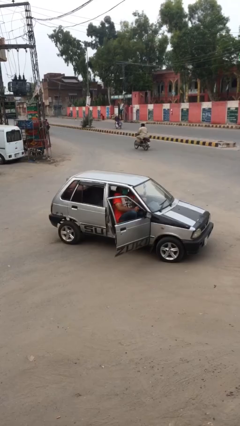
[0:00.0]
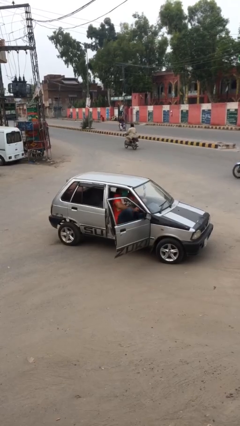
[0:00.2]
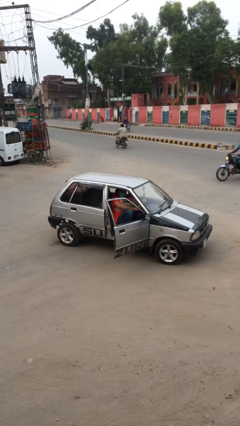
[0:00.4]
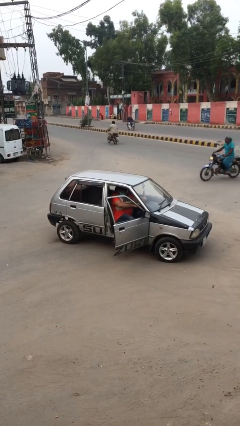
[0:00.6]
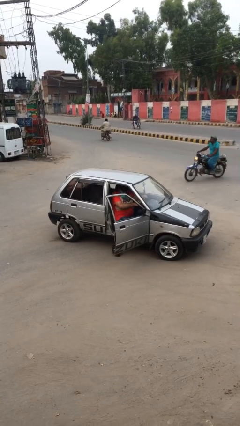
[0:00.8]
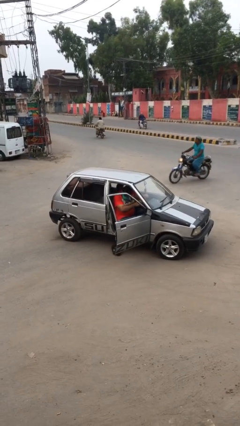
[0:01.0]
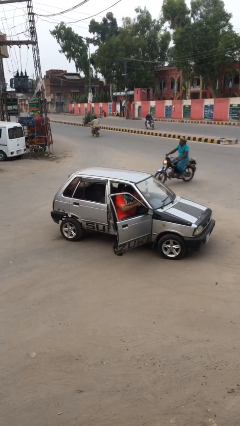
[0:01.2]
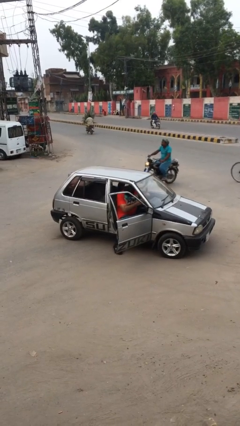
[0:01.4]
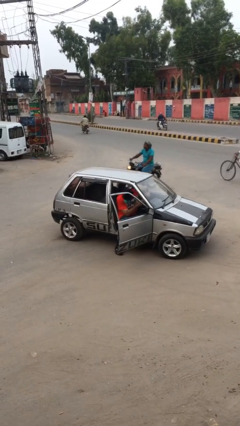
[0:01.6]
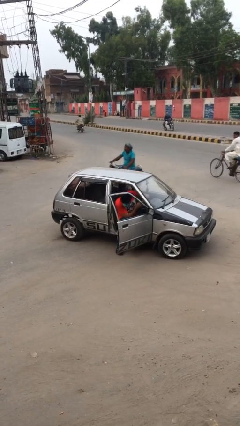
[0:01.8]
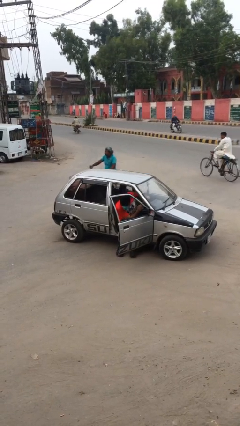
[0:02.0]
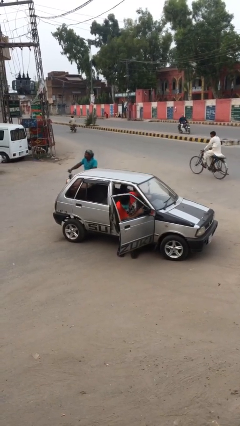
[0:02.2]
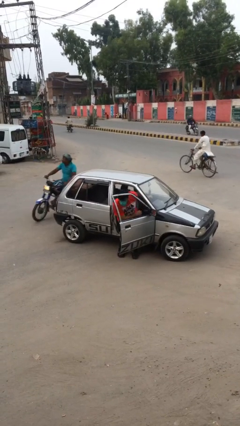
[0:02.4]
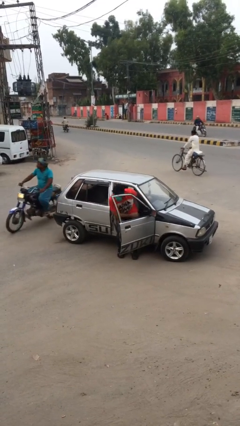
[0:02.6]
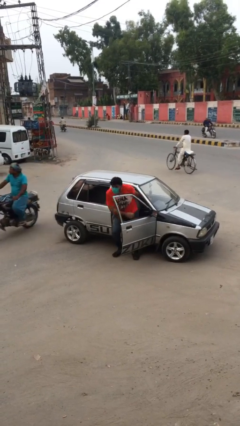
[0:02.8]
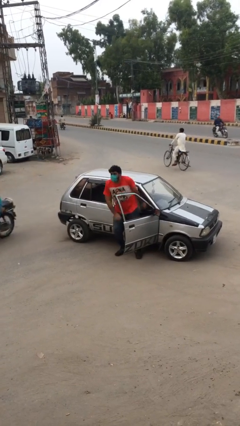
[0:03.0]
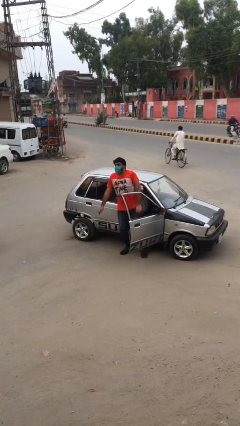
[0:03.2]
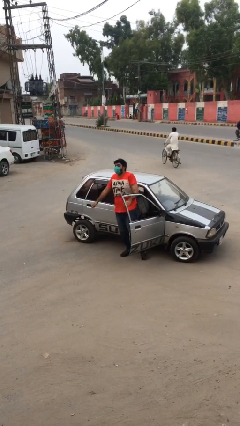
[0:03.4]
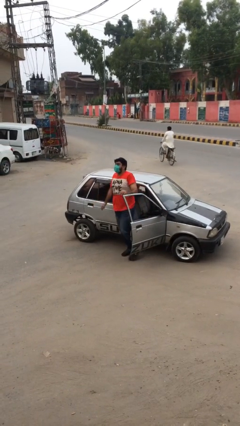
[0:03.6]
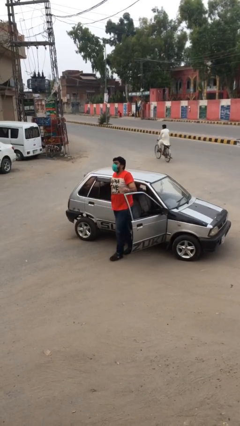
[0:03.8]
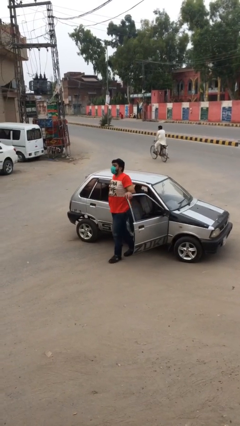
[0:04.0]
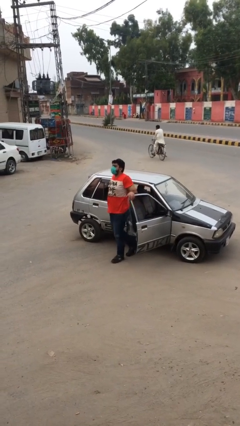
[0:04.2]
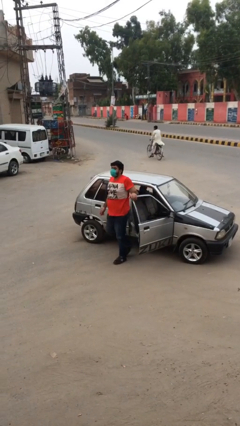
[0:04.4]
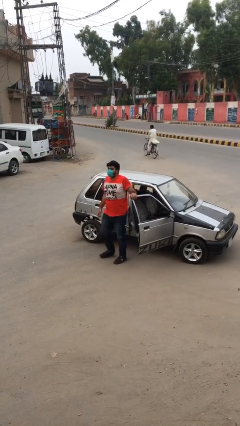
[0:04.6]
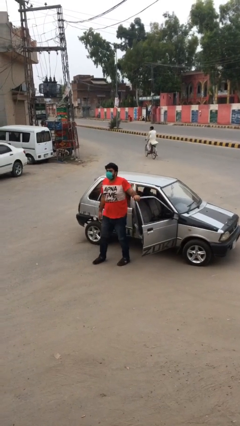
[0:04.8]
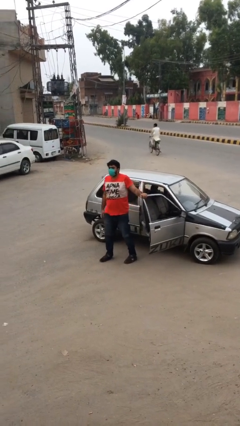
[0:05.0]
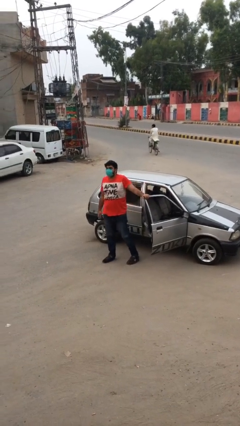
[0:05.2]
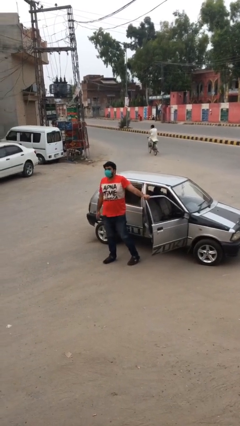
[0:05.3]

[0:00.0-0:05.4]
person exits car

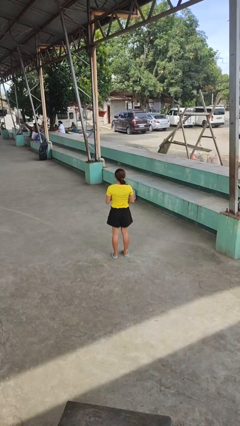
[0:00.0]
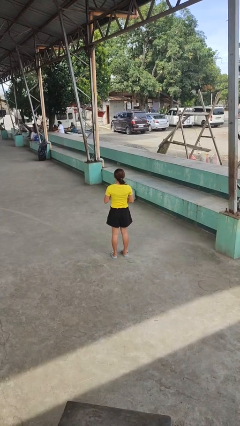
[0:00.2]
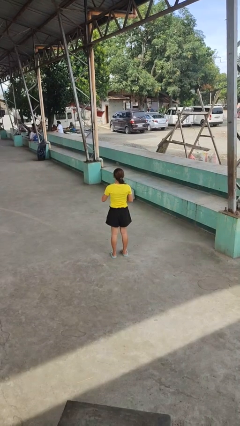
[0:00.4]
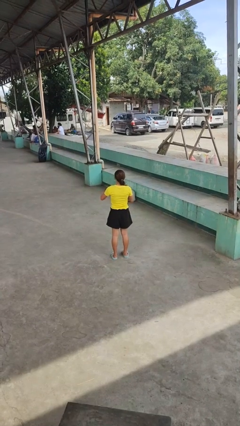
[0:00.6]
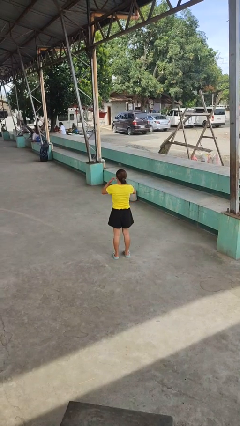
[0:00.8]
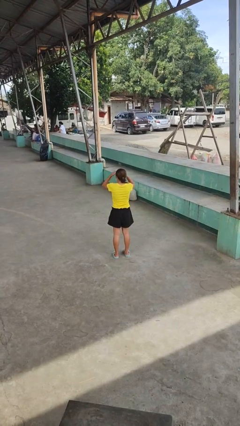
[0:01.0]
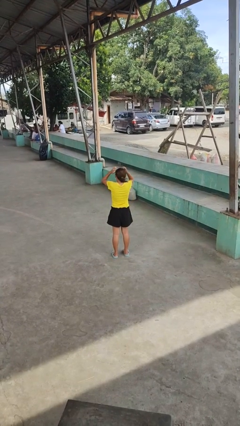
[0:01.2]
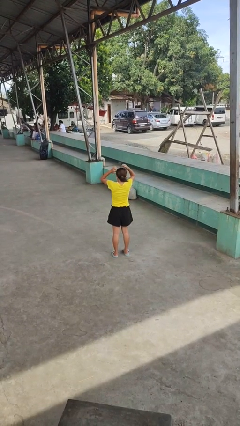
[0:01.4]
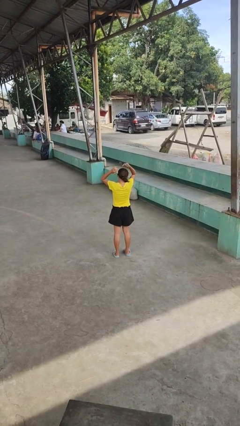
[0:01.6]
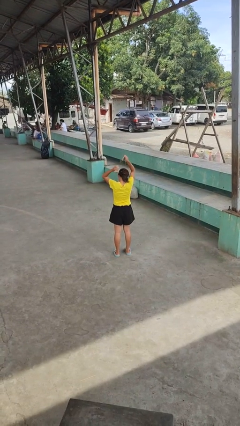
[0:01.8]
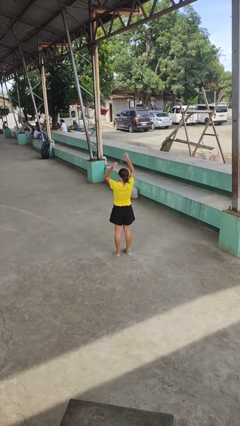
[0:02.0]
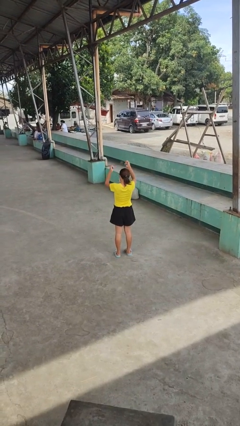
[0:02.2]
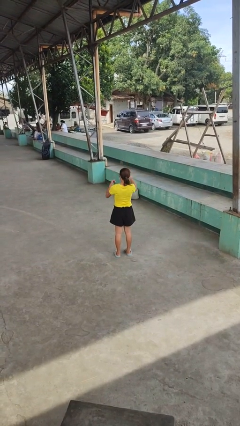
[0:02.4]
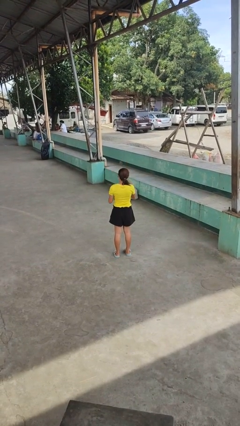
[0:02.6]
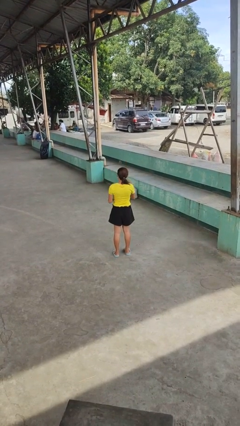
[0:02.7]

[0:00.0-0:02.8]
person takes off necklace

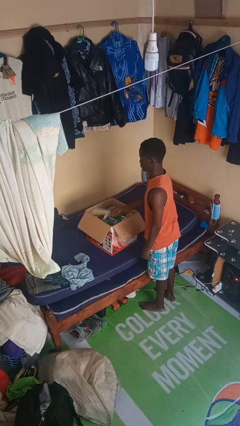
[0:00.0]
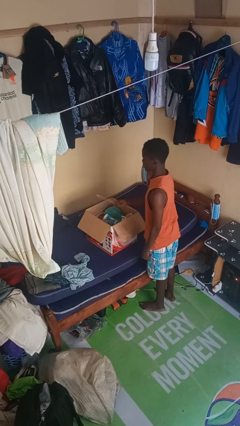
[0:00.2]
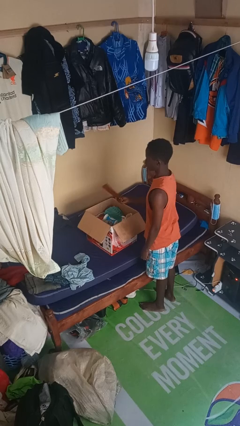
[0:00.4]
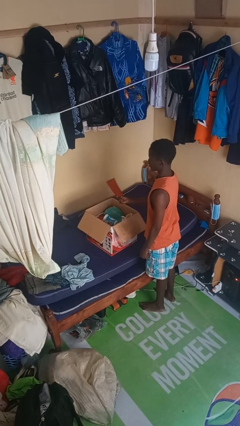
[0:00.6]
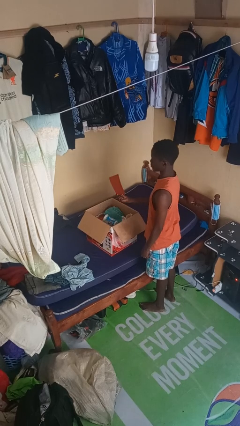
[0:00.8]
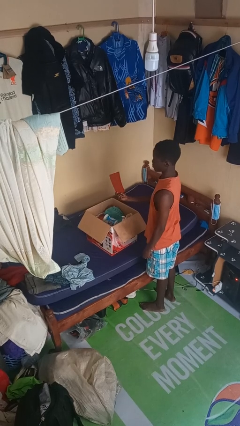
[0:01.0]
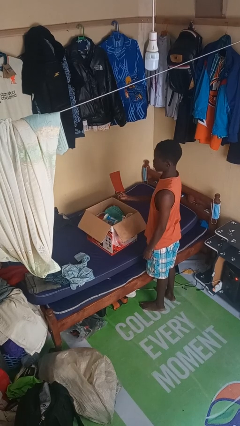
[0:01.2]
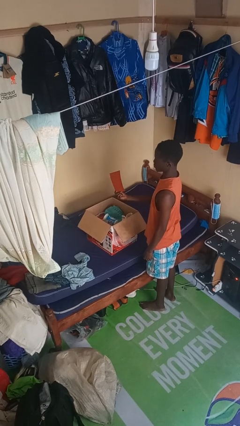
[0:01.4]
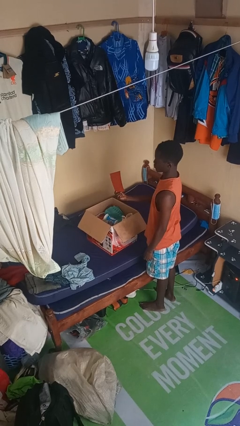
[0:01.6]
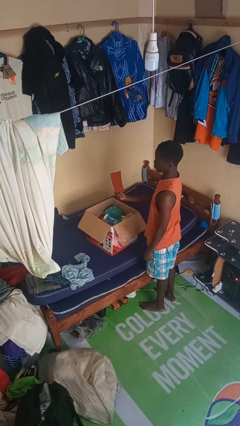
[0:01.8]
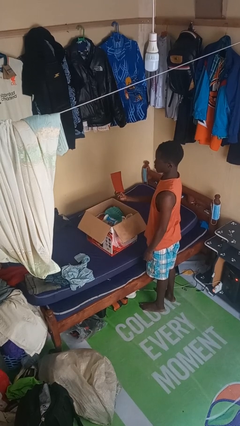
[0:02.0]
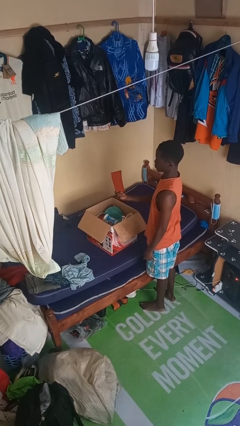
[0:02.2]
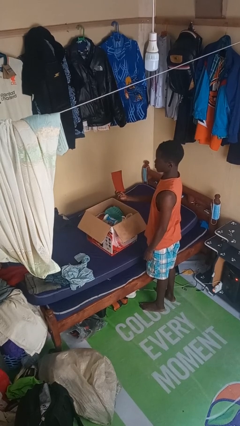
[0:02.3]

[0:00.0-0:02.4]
person takes object from box

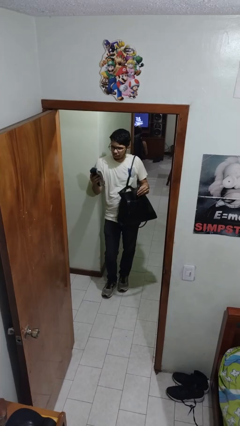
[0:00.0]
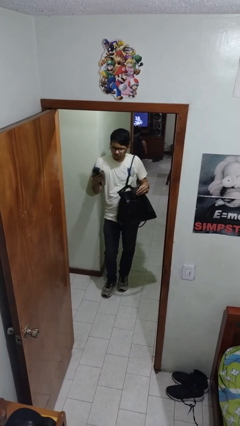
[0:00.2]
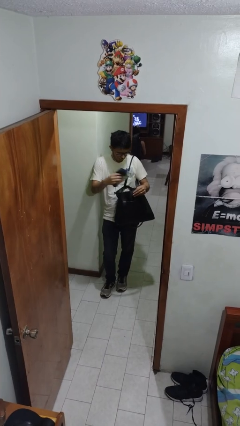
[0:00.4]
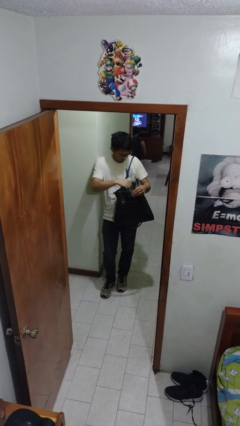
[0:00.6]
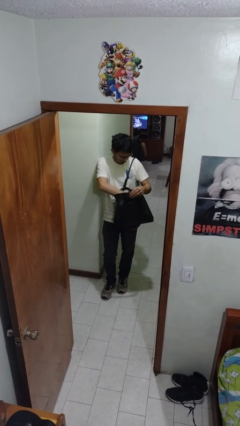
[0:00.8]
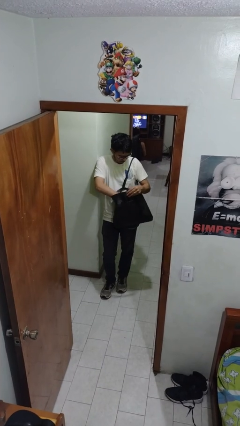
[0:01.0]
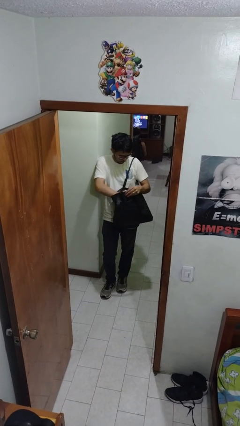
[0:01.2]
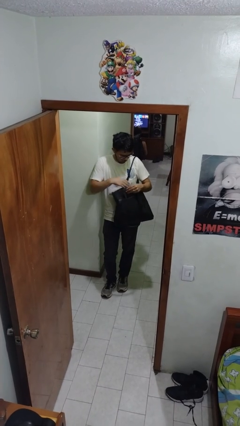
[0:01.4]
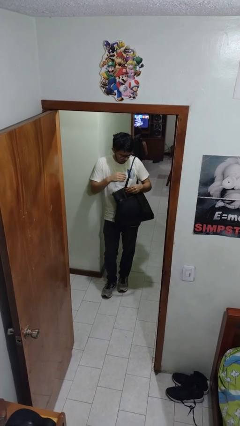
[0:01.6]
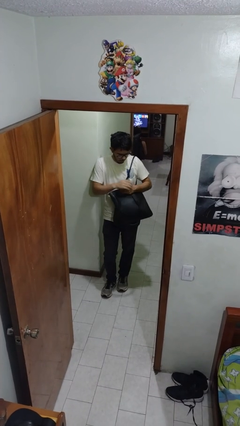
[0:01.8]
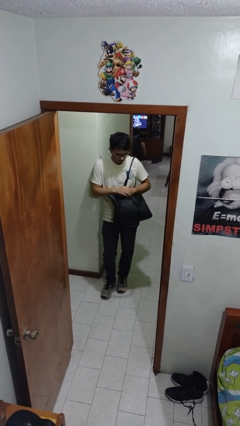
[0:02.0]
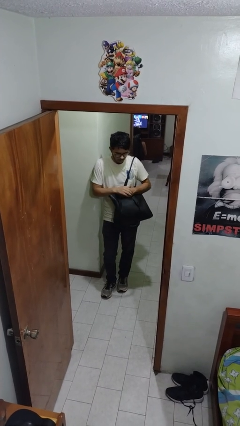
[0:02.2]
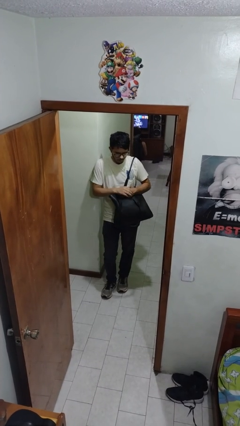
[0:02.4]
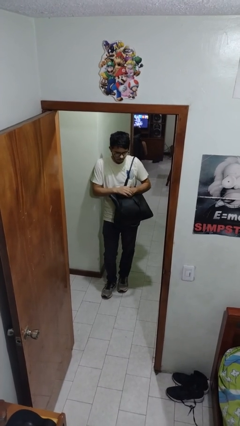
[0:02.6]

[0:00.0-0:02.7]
person puts object into purse

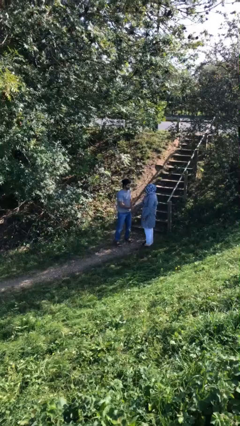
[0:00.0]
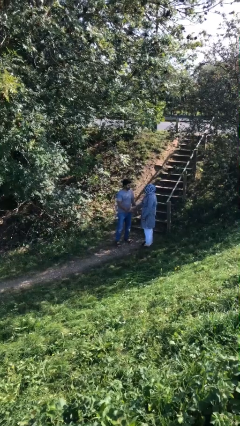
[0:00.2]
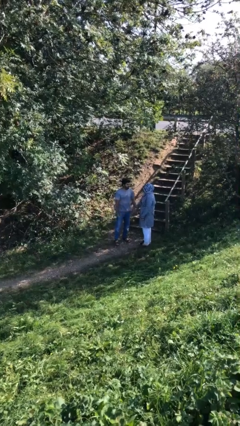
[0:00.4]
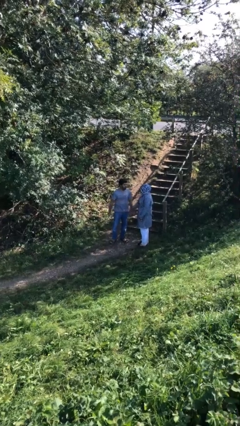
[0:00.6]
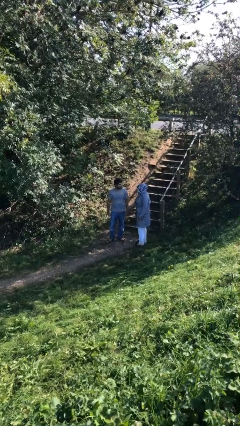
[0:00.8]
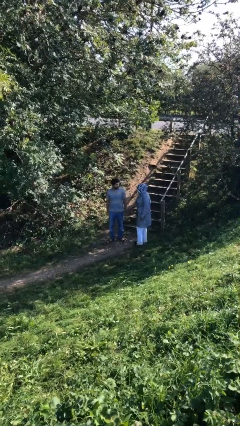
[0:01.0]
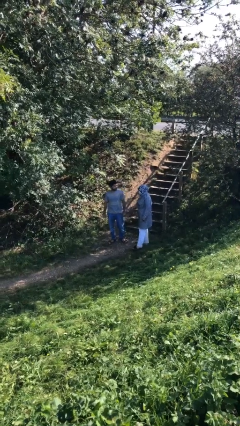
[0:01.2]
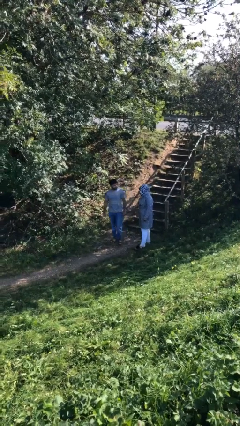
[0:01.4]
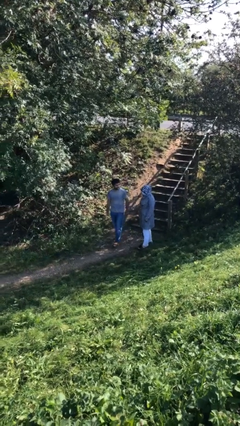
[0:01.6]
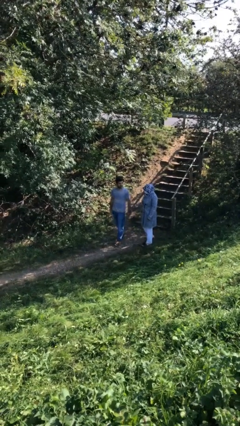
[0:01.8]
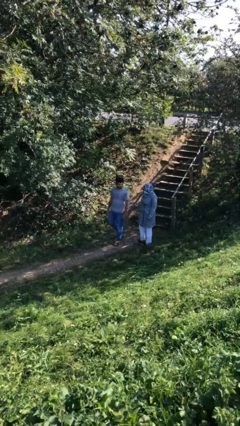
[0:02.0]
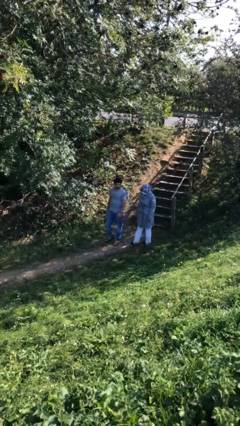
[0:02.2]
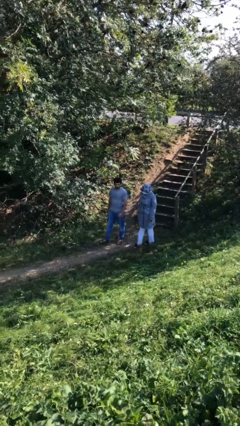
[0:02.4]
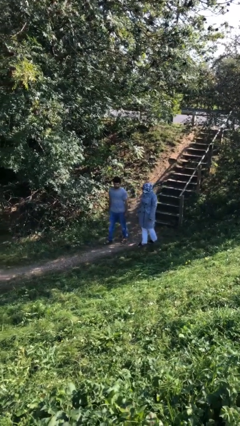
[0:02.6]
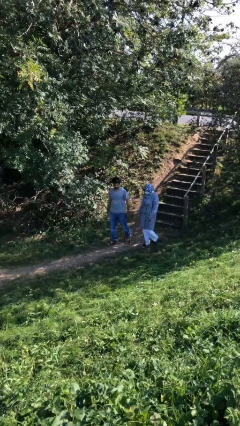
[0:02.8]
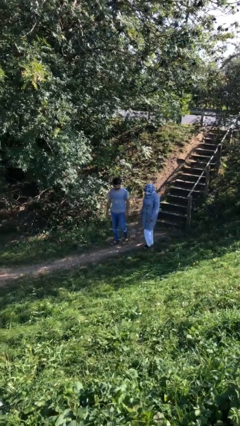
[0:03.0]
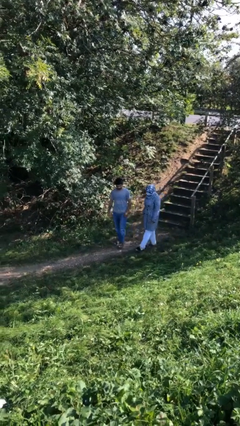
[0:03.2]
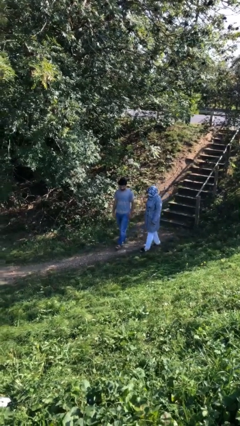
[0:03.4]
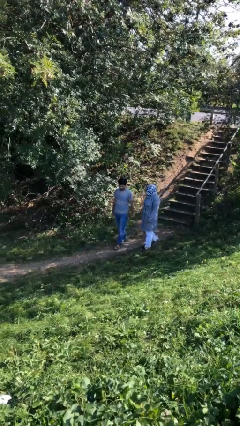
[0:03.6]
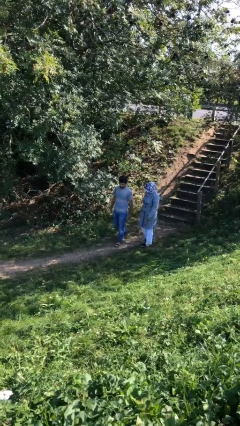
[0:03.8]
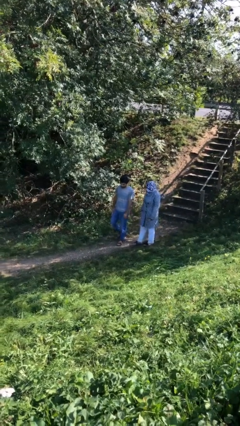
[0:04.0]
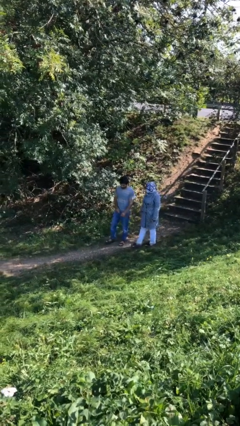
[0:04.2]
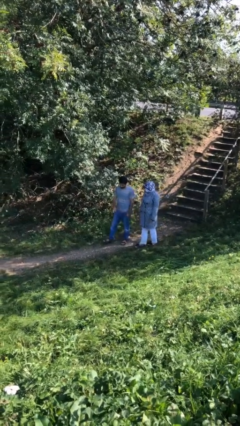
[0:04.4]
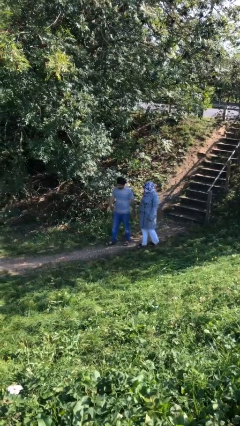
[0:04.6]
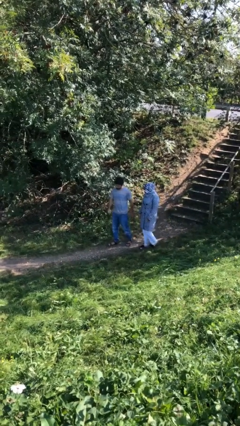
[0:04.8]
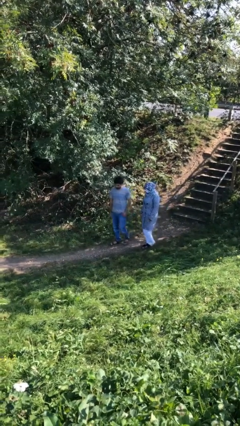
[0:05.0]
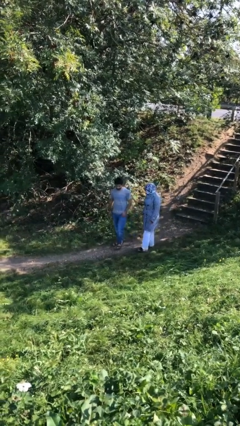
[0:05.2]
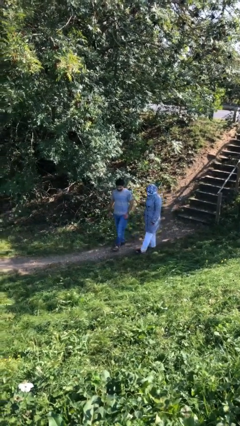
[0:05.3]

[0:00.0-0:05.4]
person talks to person
